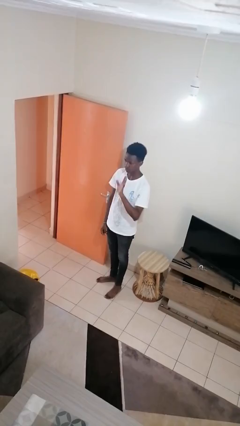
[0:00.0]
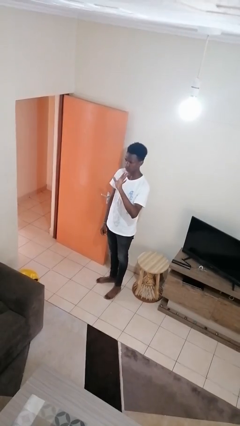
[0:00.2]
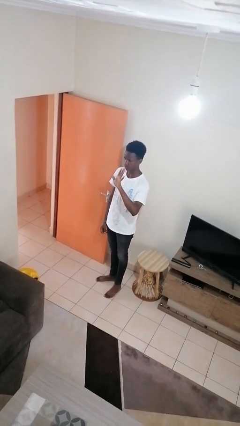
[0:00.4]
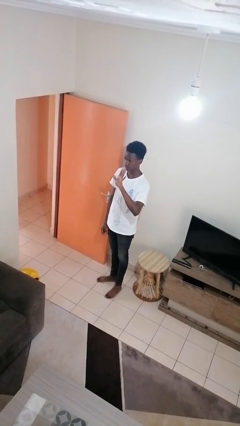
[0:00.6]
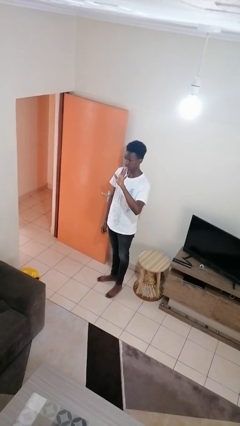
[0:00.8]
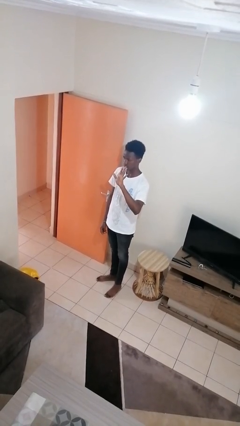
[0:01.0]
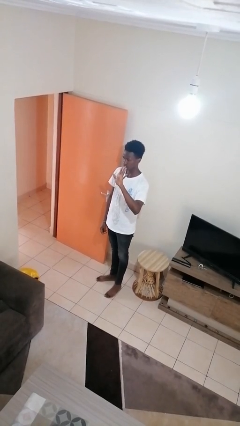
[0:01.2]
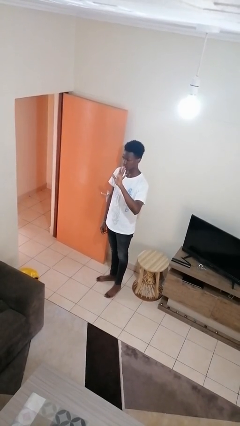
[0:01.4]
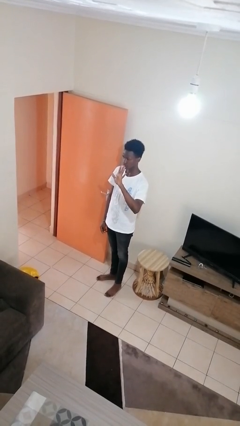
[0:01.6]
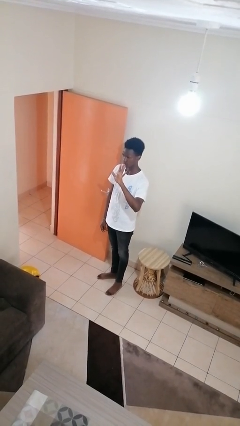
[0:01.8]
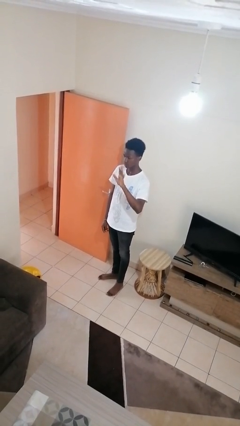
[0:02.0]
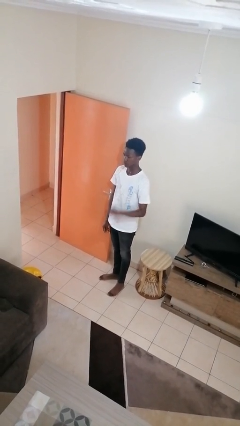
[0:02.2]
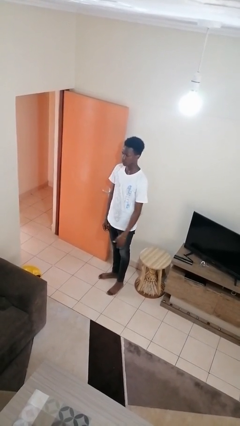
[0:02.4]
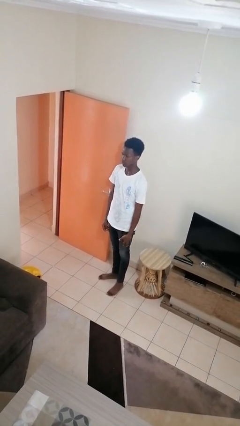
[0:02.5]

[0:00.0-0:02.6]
person gestures number five

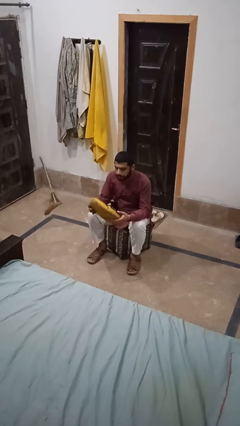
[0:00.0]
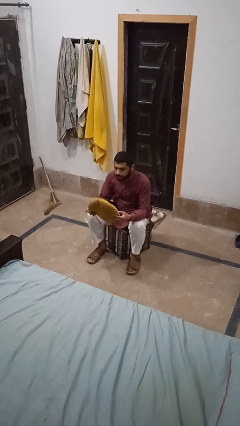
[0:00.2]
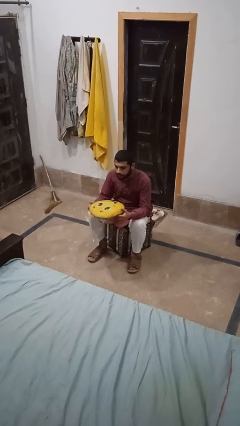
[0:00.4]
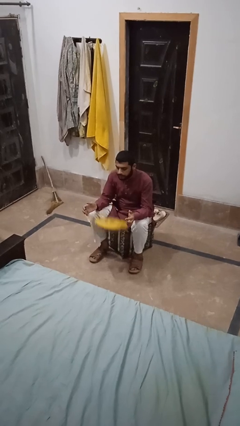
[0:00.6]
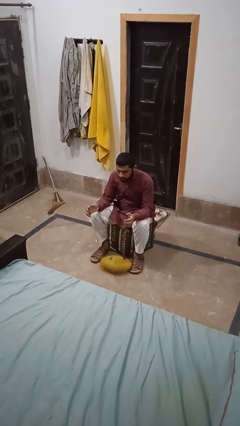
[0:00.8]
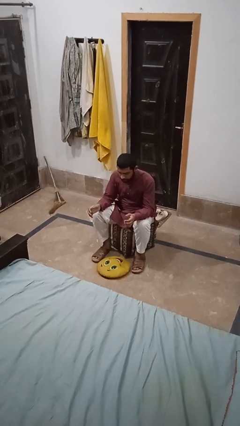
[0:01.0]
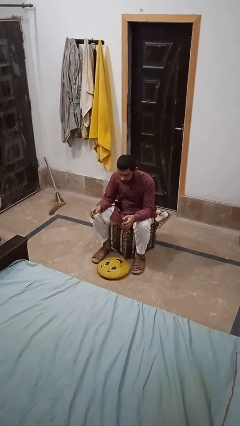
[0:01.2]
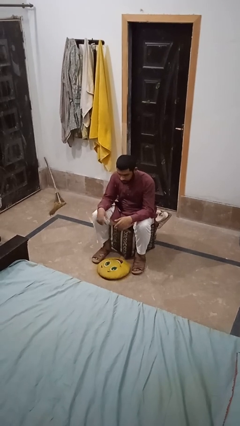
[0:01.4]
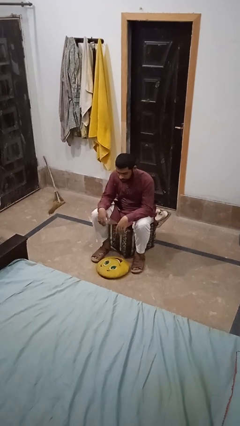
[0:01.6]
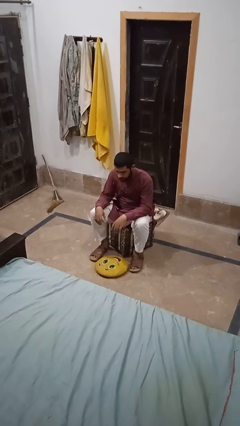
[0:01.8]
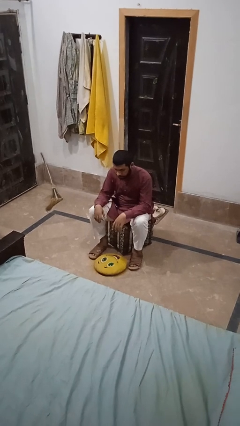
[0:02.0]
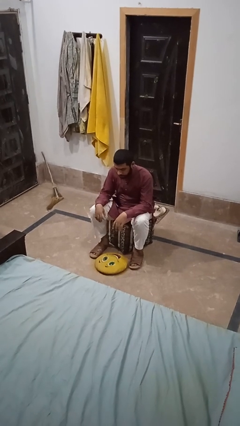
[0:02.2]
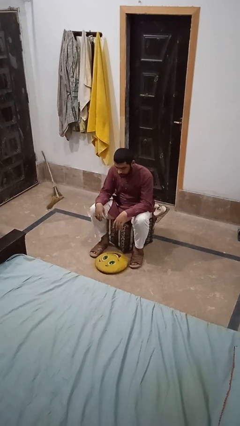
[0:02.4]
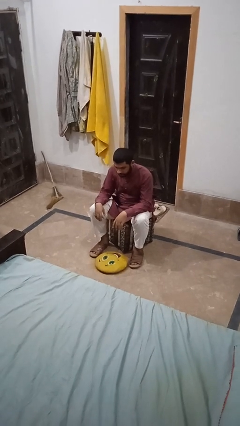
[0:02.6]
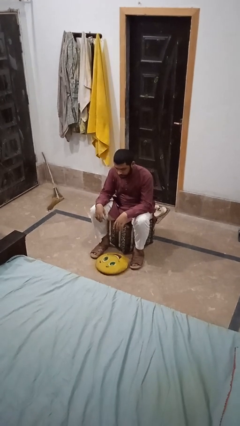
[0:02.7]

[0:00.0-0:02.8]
person drops object

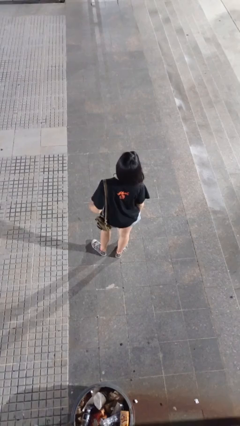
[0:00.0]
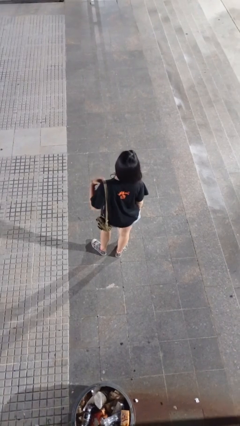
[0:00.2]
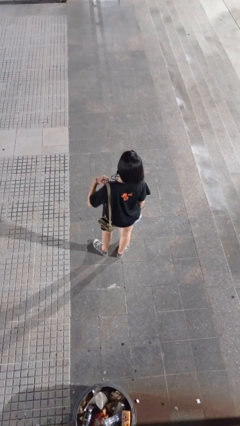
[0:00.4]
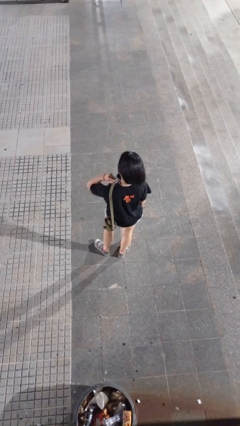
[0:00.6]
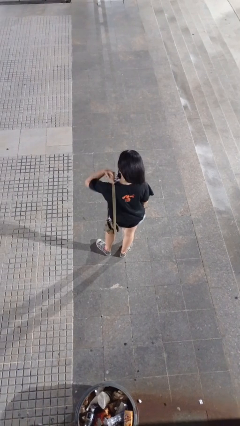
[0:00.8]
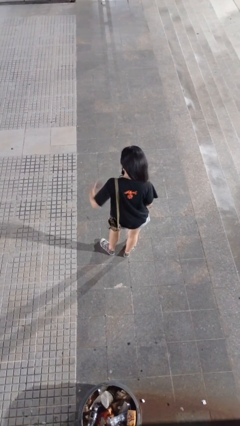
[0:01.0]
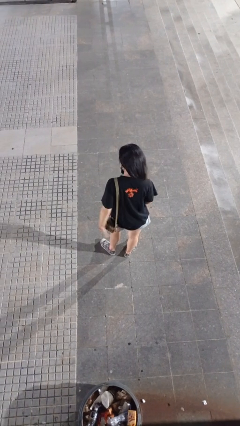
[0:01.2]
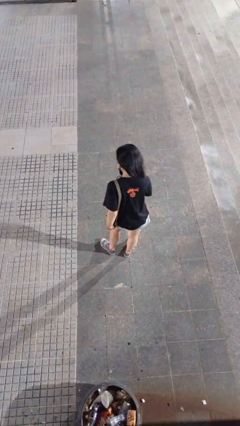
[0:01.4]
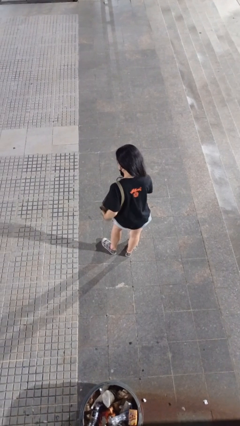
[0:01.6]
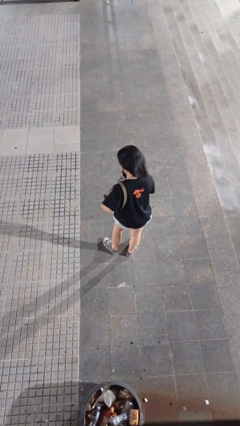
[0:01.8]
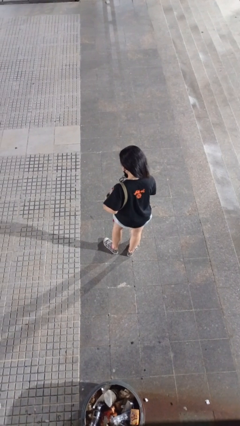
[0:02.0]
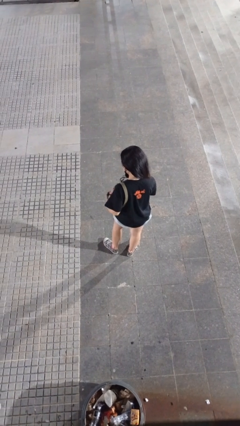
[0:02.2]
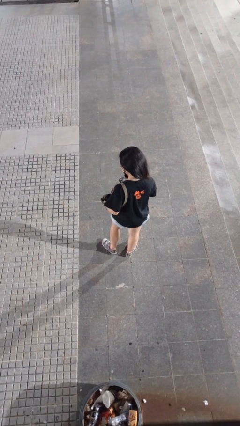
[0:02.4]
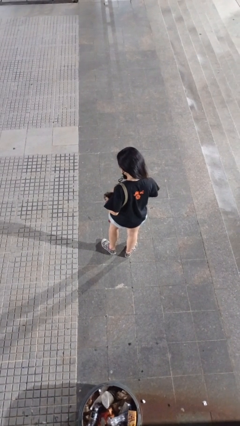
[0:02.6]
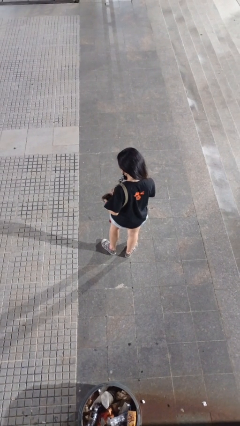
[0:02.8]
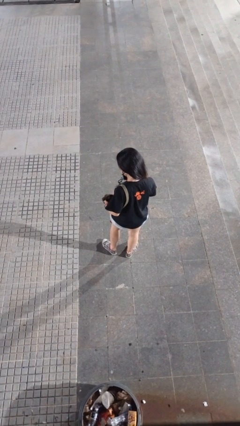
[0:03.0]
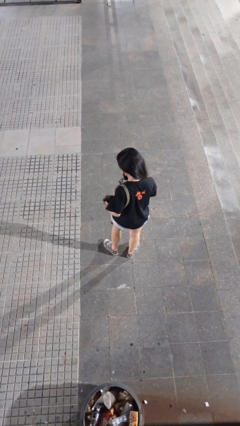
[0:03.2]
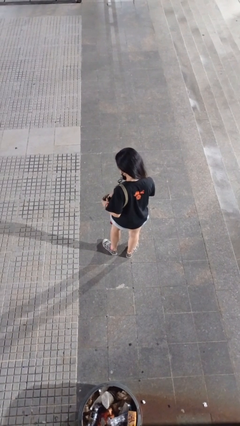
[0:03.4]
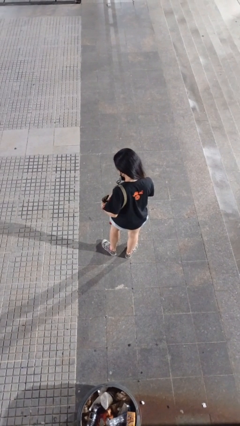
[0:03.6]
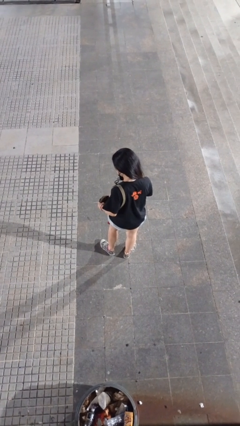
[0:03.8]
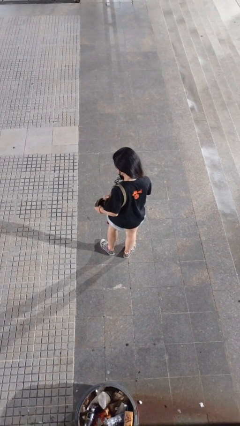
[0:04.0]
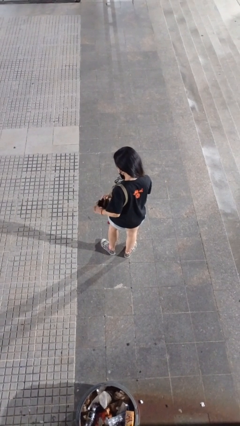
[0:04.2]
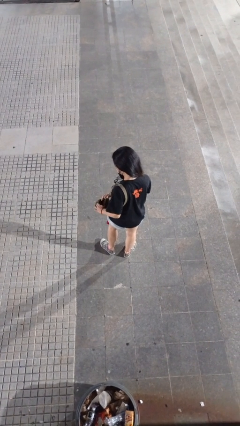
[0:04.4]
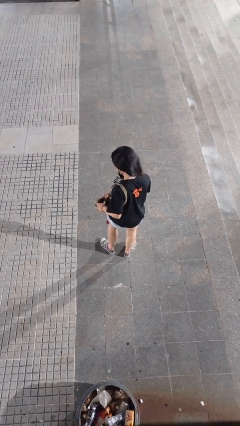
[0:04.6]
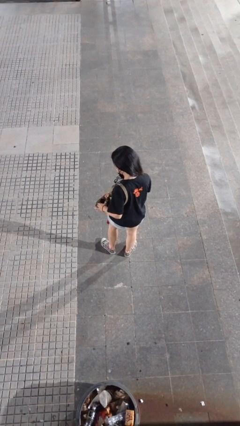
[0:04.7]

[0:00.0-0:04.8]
person searches in purse

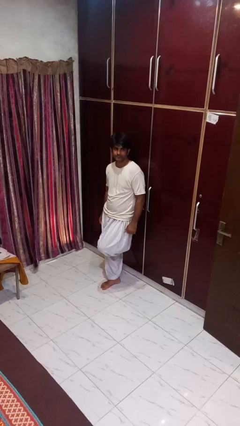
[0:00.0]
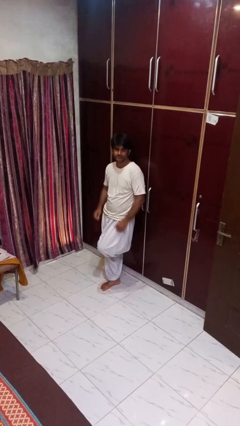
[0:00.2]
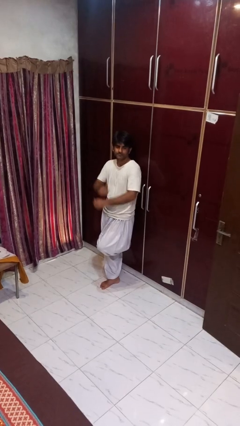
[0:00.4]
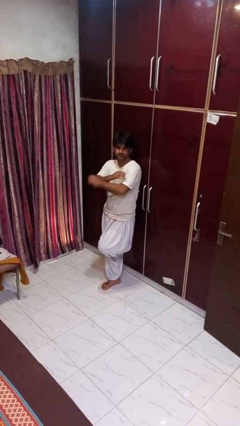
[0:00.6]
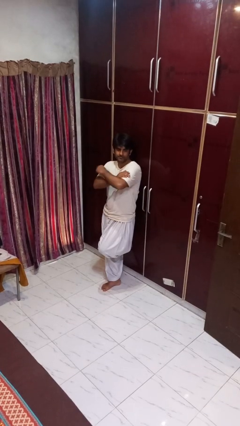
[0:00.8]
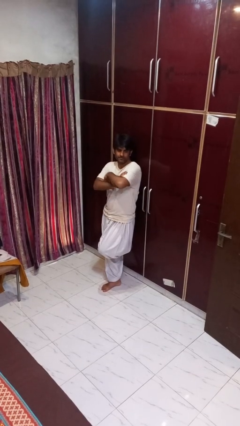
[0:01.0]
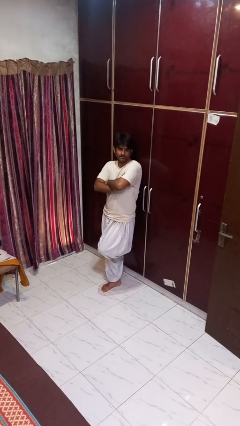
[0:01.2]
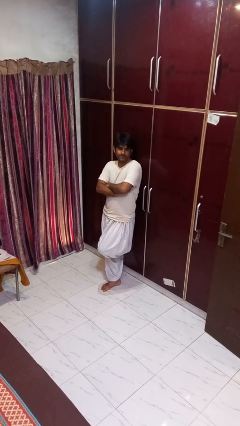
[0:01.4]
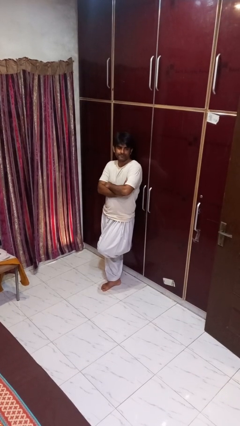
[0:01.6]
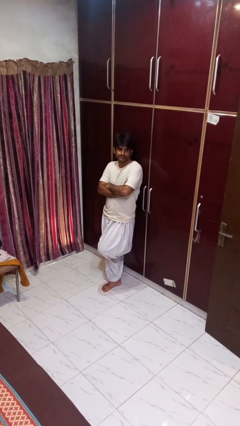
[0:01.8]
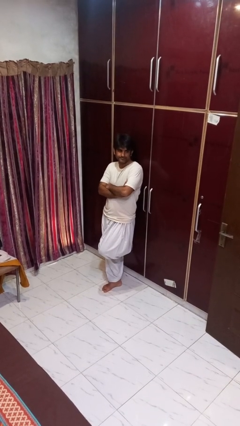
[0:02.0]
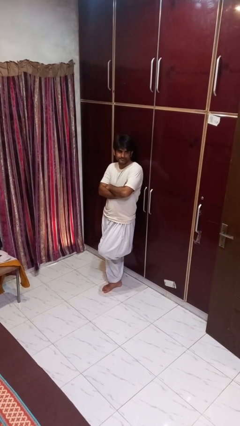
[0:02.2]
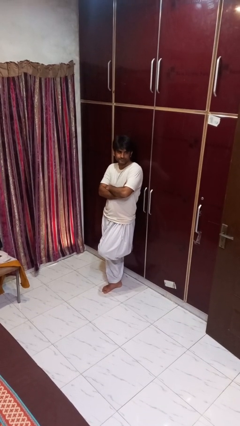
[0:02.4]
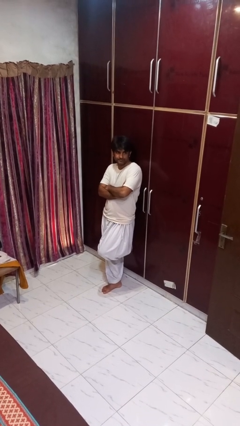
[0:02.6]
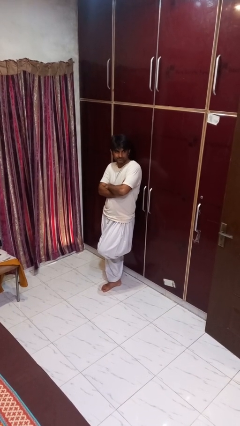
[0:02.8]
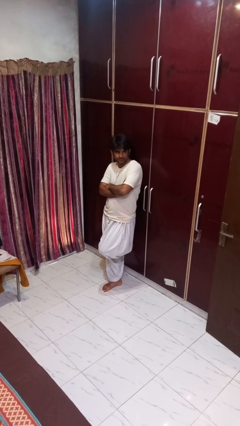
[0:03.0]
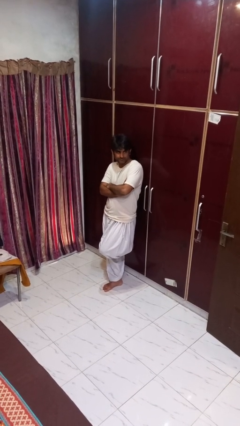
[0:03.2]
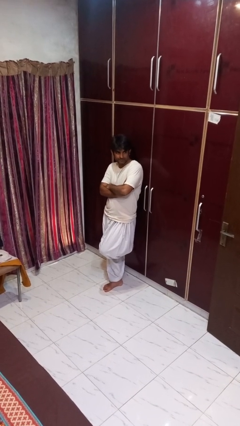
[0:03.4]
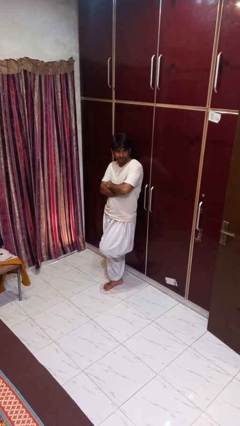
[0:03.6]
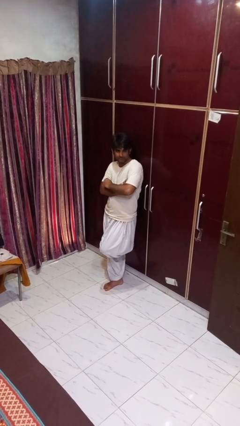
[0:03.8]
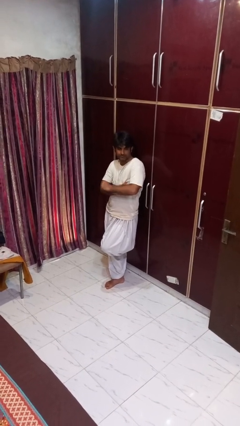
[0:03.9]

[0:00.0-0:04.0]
person crosses arms

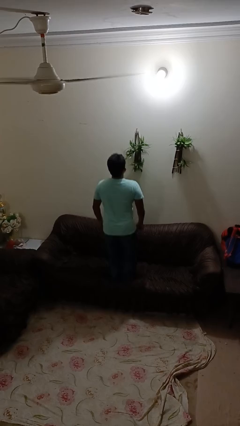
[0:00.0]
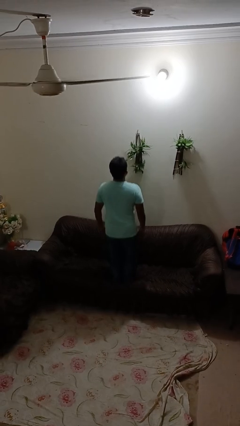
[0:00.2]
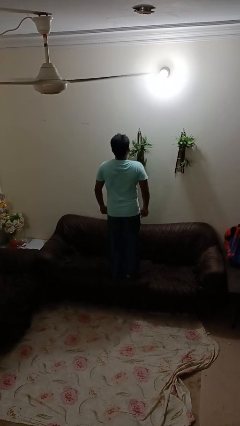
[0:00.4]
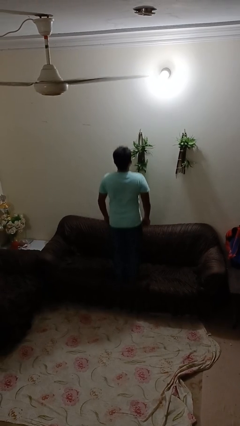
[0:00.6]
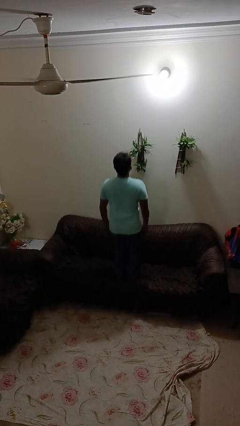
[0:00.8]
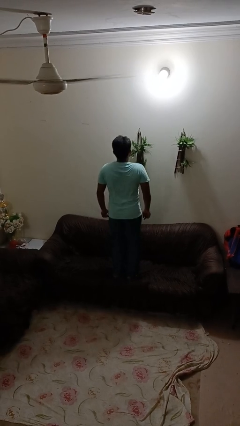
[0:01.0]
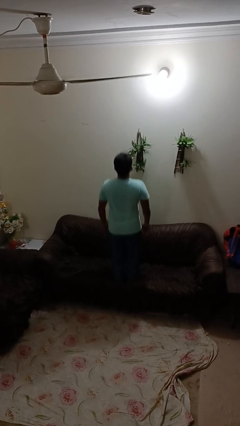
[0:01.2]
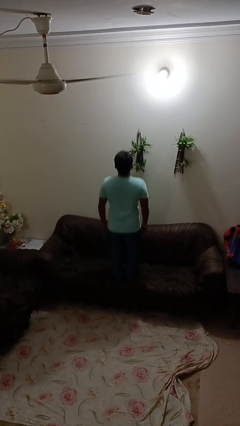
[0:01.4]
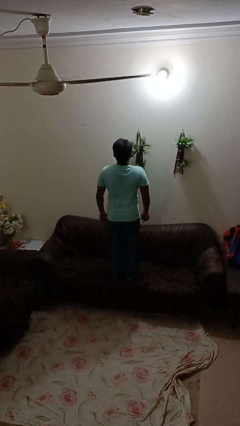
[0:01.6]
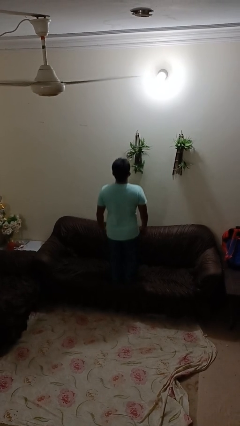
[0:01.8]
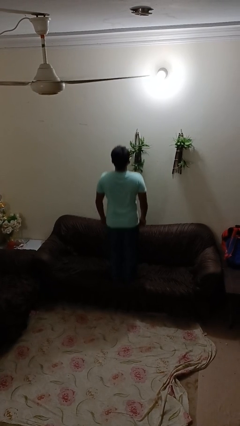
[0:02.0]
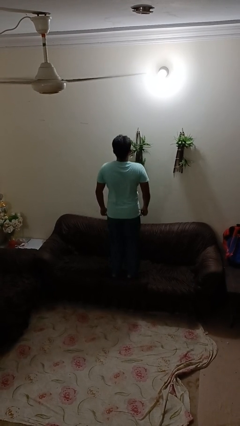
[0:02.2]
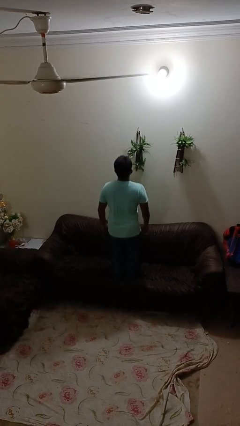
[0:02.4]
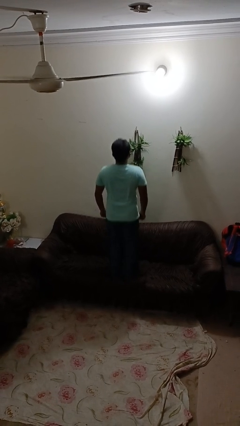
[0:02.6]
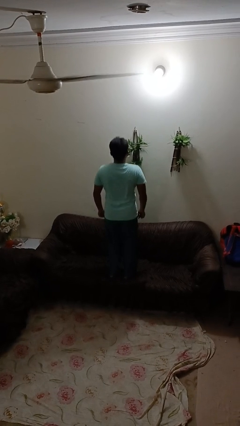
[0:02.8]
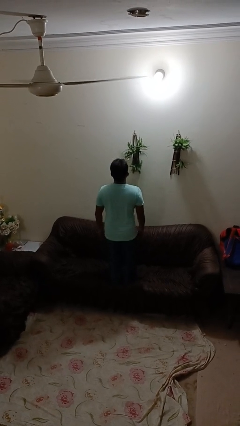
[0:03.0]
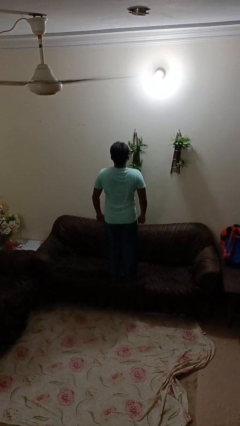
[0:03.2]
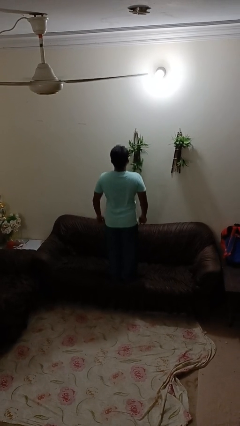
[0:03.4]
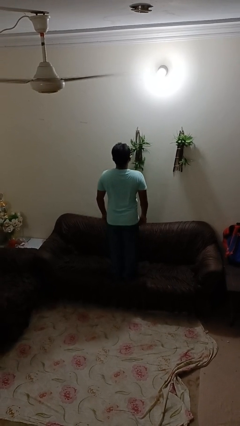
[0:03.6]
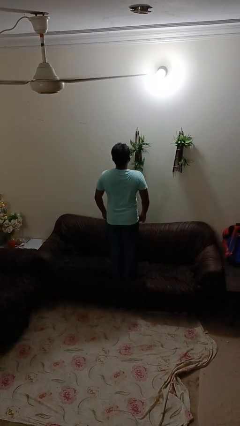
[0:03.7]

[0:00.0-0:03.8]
person jumps on couch
